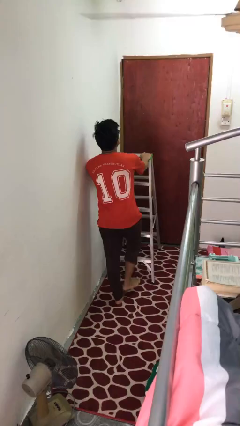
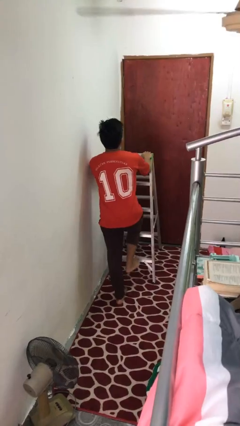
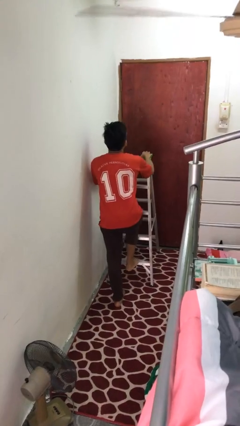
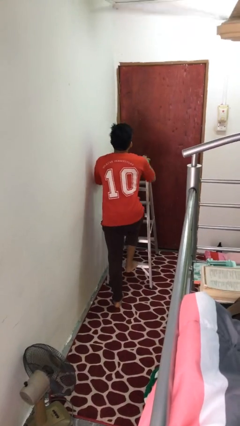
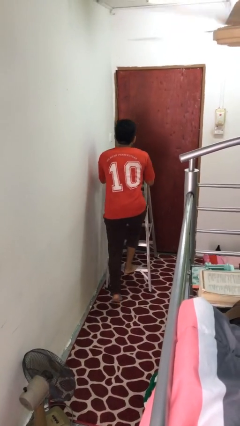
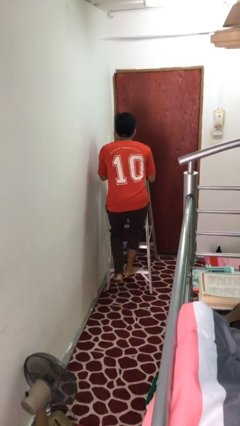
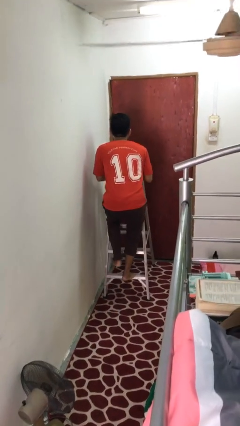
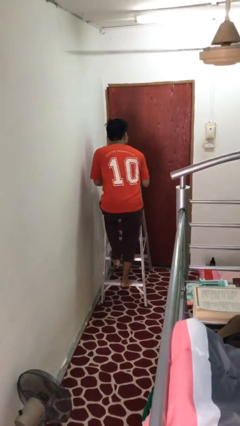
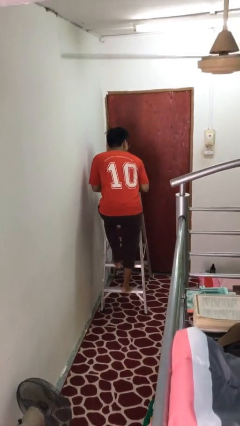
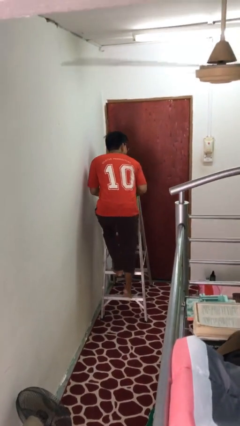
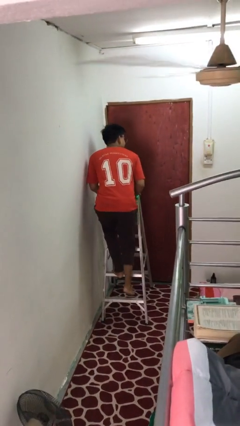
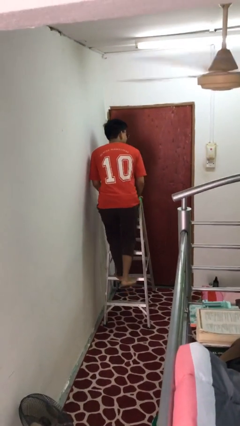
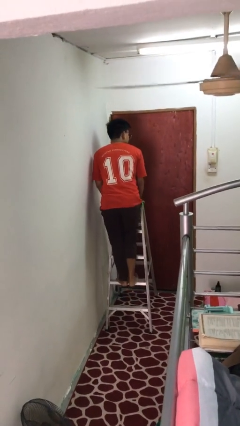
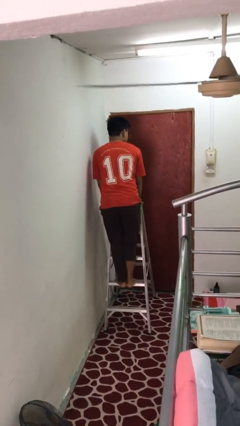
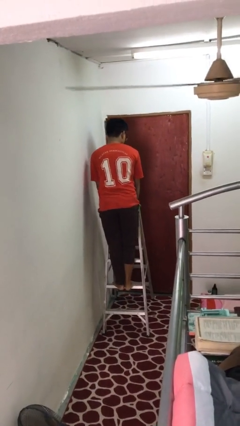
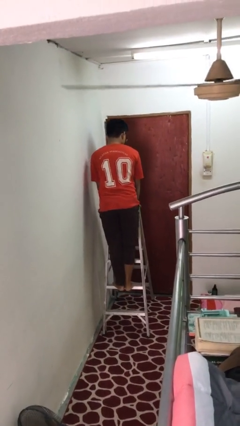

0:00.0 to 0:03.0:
person climbs up ladder

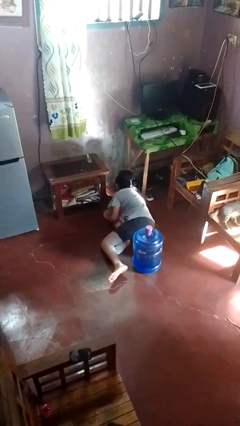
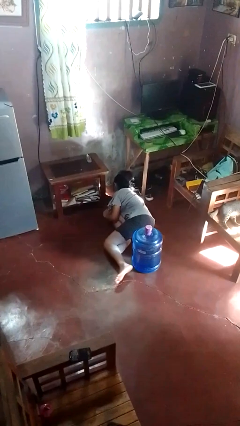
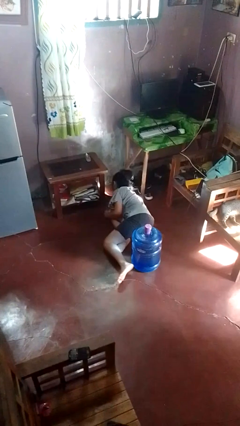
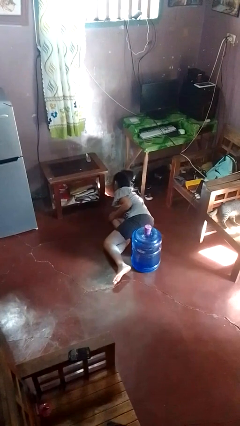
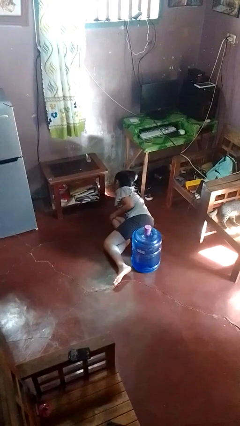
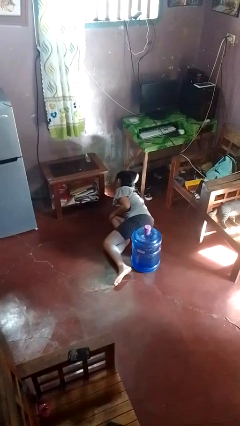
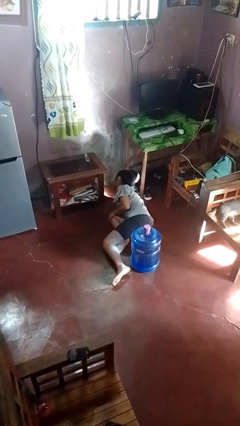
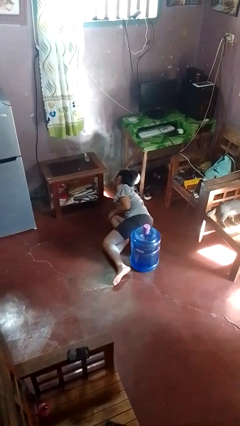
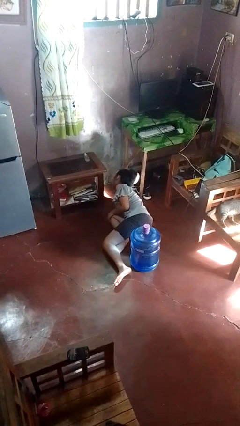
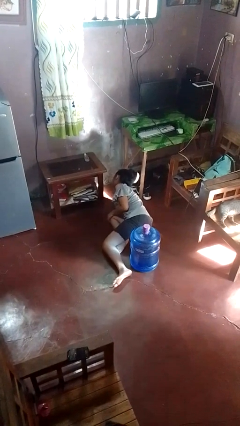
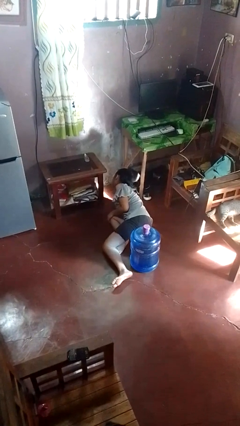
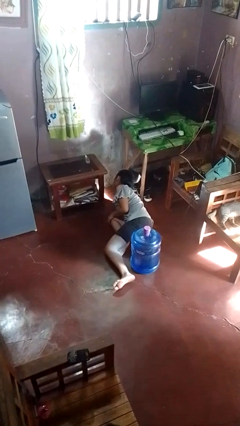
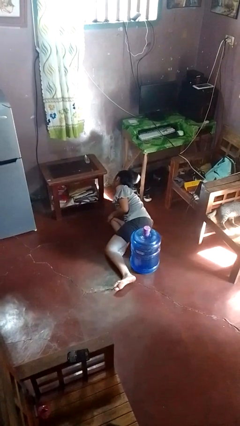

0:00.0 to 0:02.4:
person lies down on floor

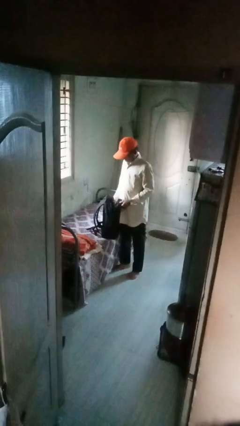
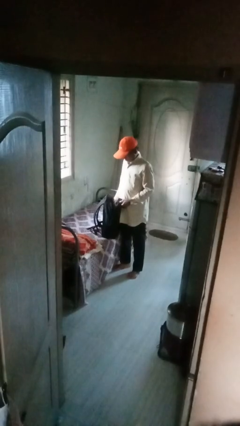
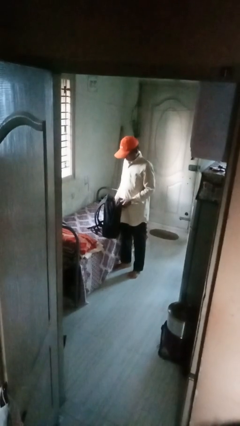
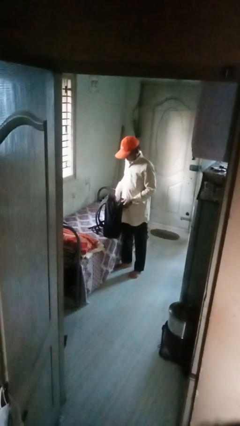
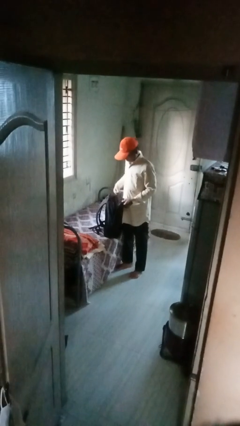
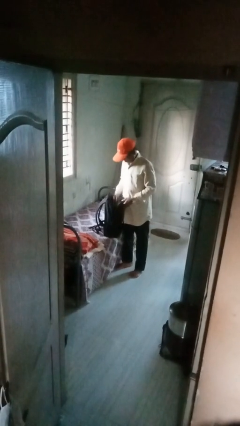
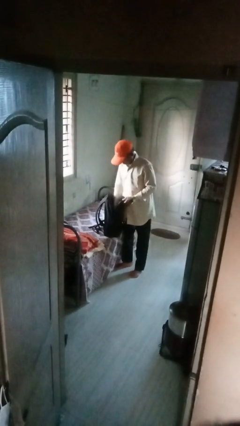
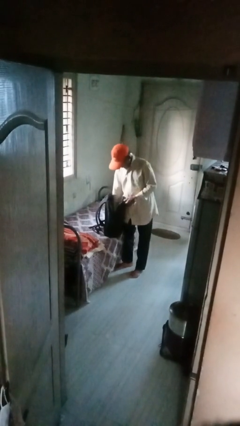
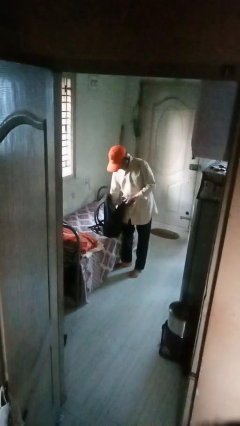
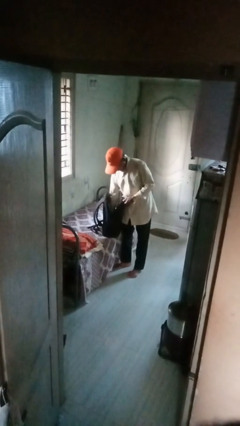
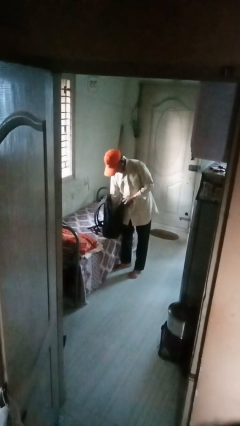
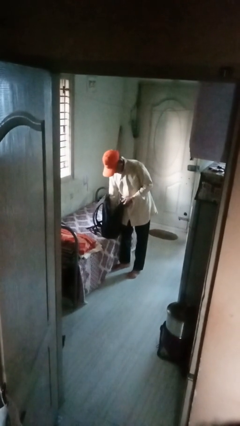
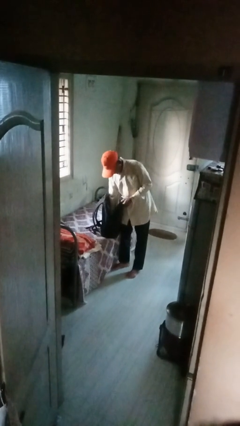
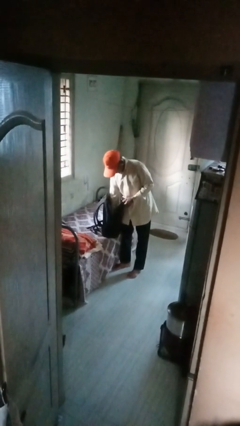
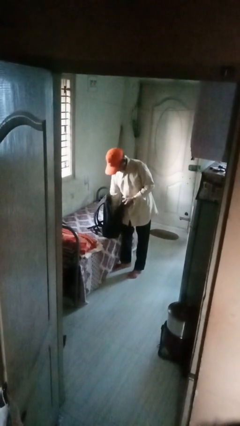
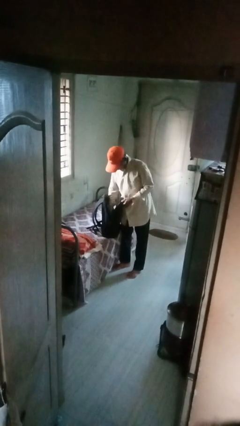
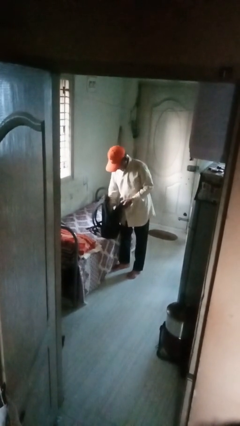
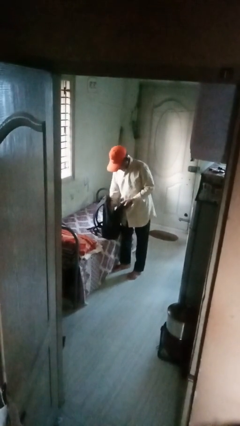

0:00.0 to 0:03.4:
person searches in backpack

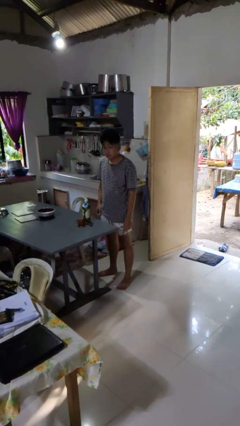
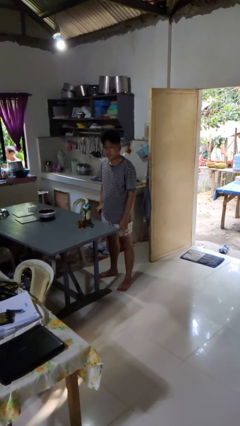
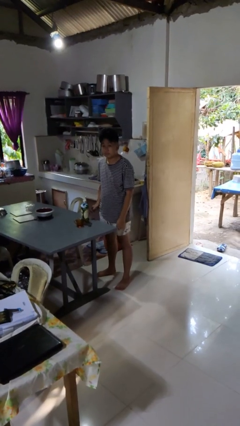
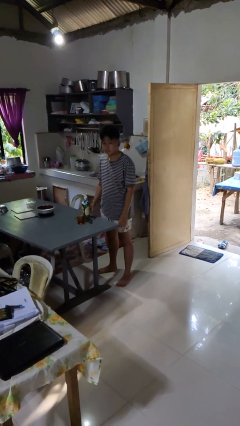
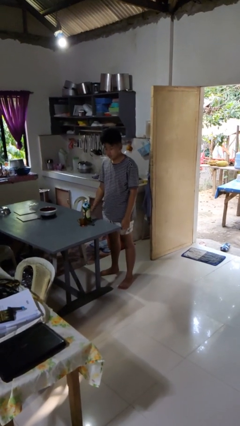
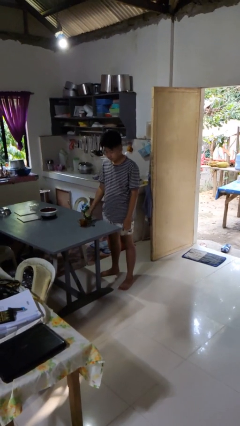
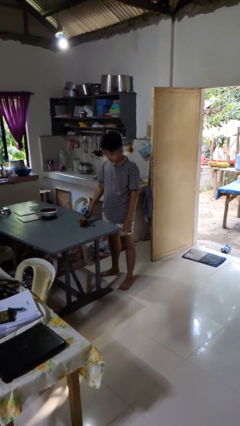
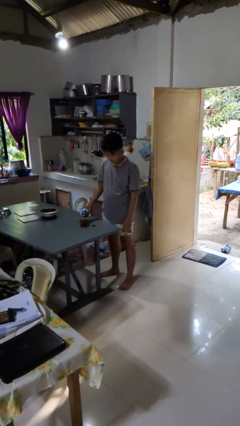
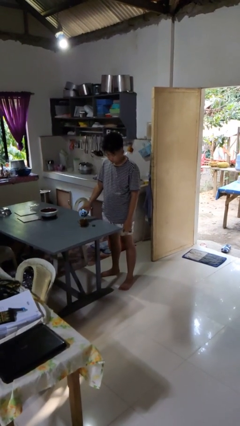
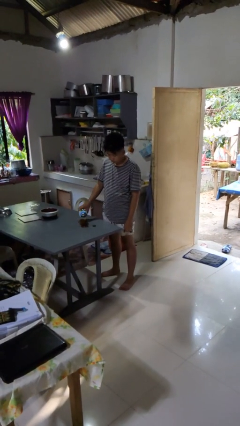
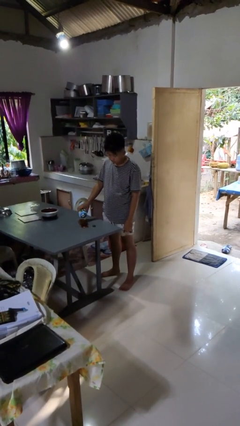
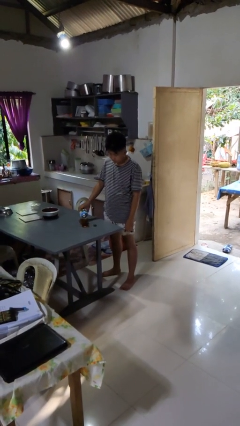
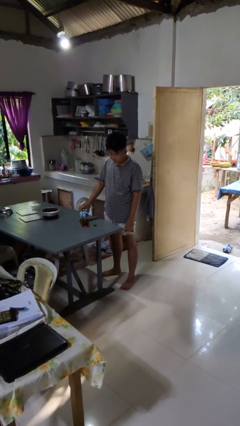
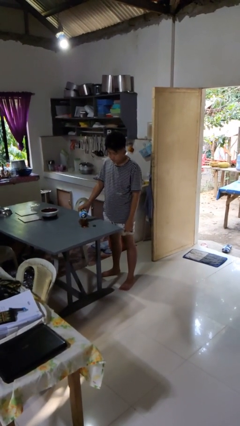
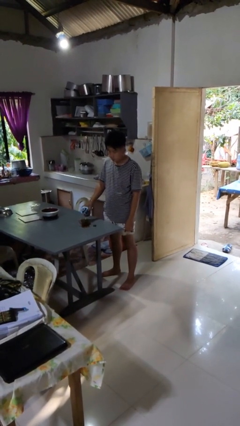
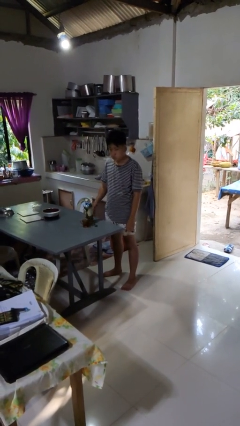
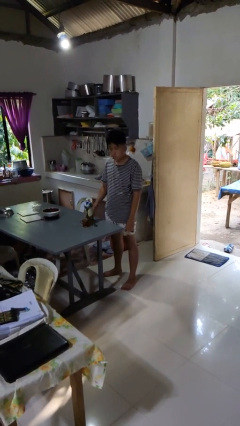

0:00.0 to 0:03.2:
person pours liquid into cup

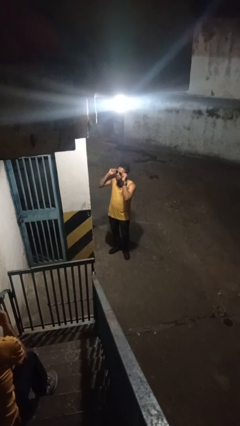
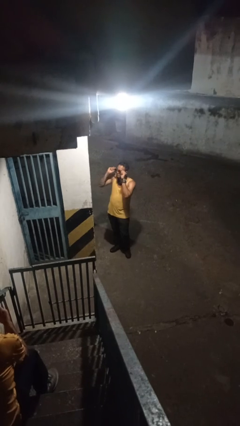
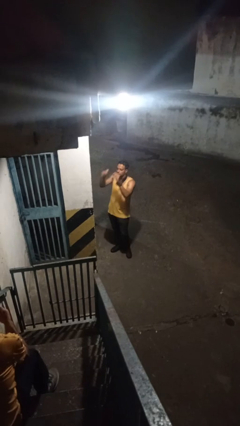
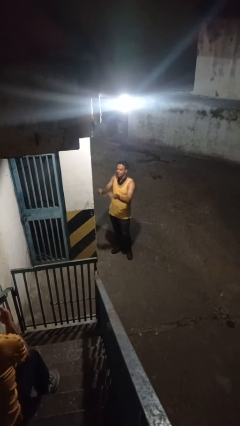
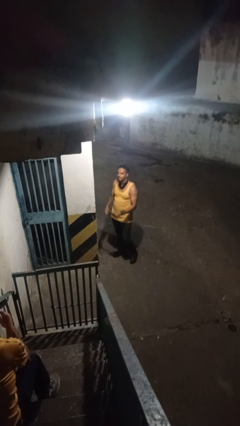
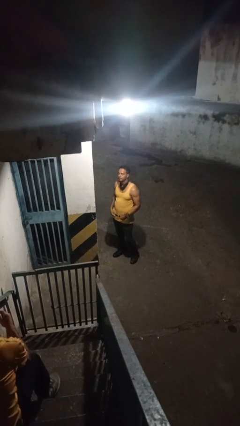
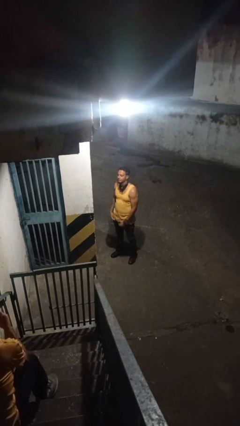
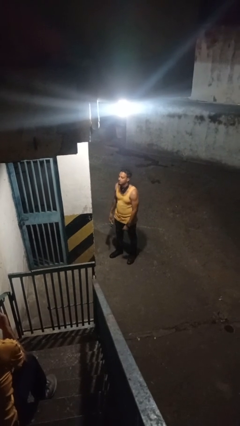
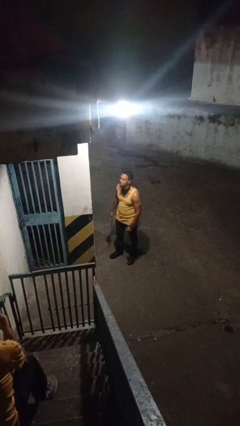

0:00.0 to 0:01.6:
person takes off sunglasses

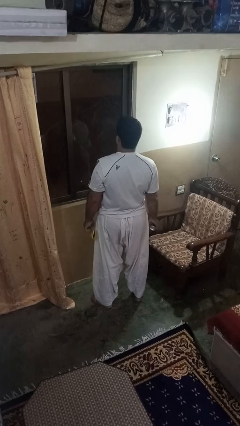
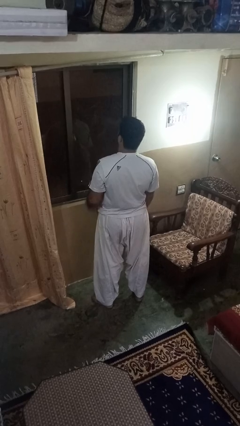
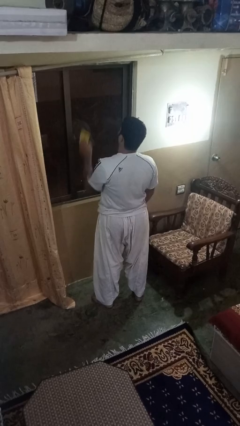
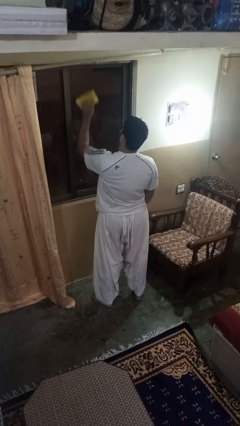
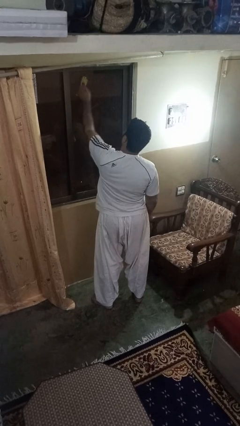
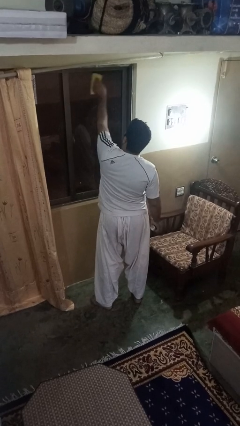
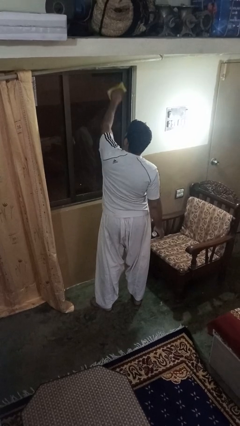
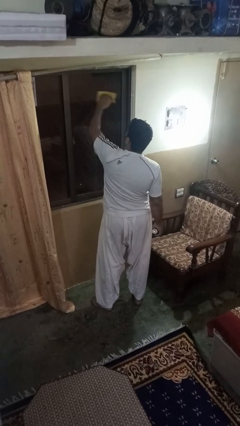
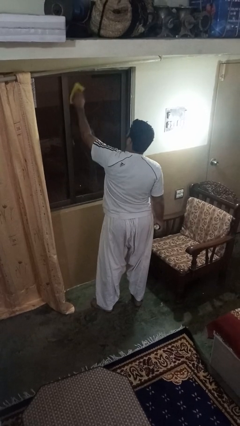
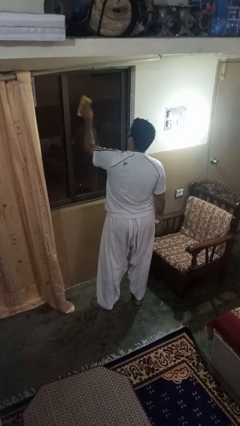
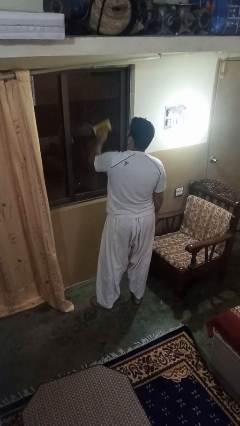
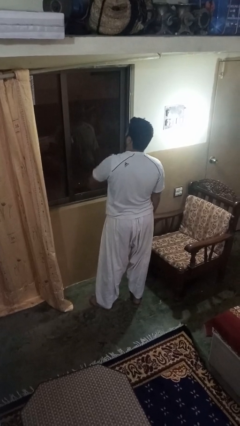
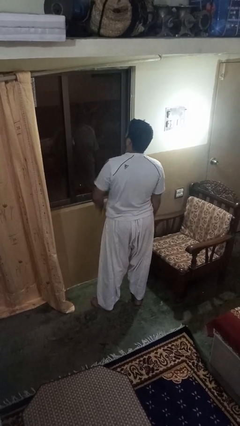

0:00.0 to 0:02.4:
person washes window

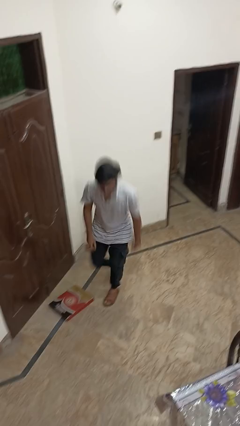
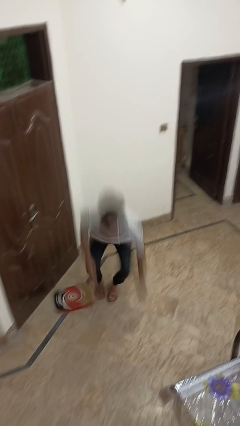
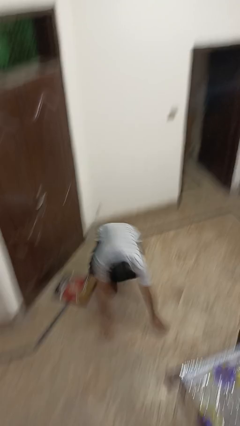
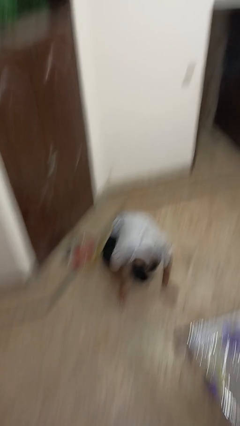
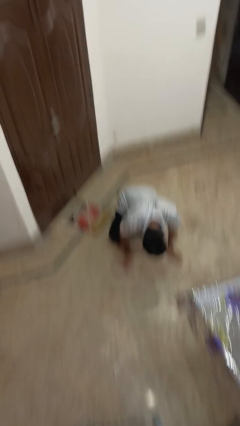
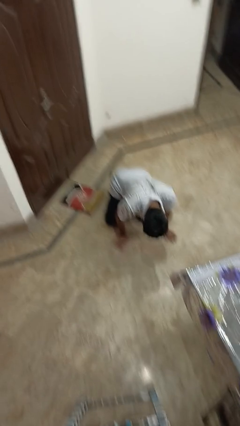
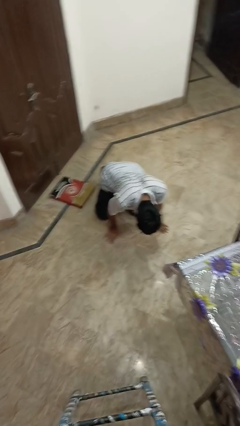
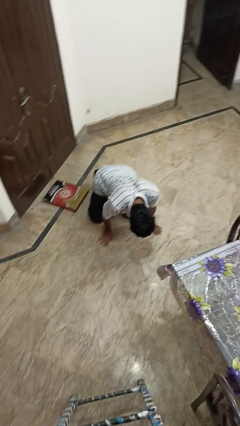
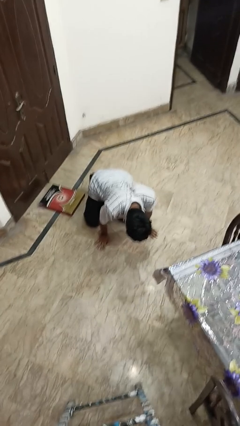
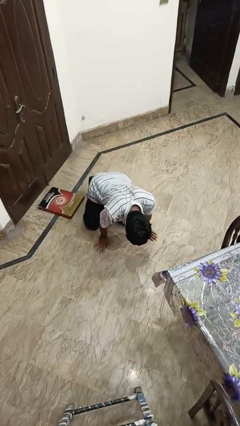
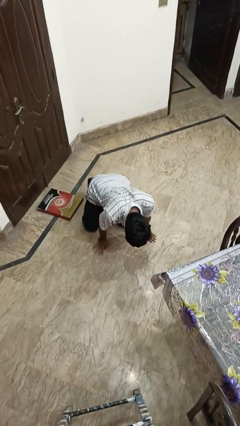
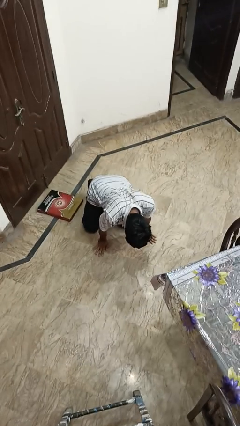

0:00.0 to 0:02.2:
person trips on object on floor
